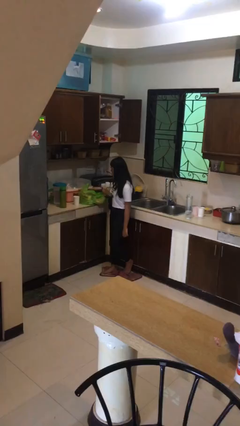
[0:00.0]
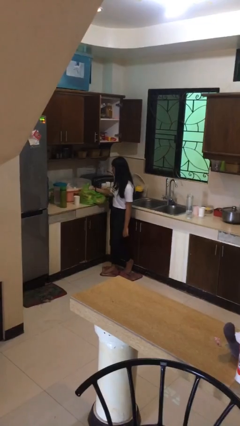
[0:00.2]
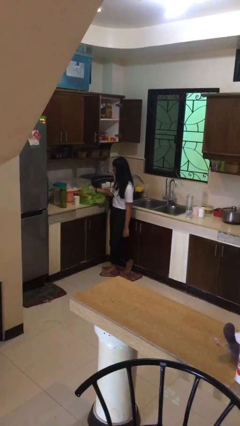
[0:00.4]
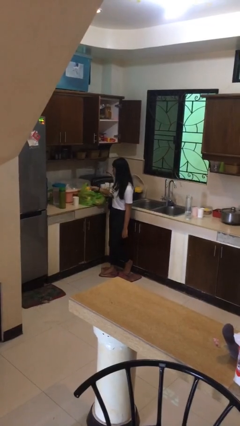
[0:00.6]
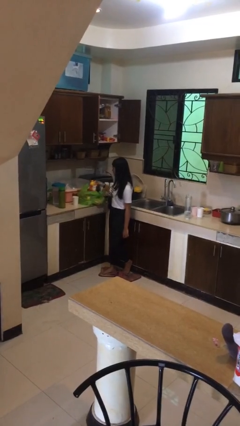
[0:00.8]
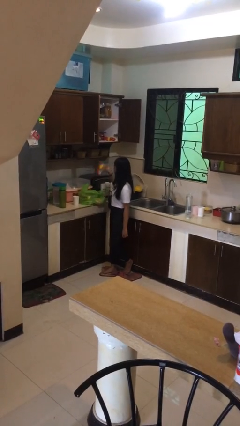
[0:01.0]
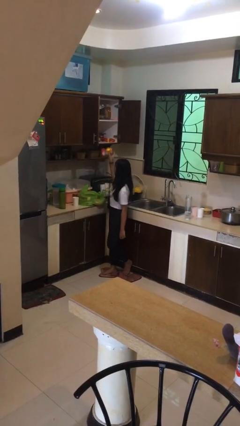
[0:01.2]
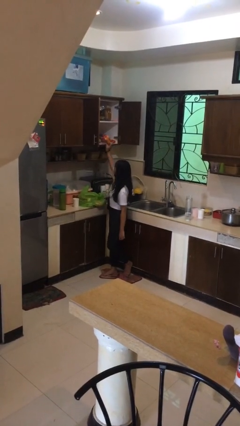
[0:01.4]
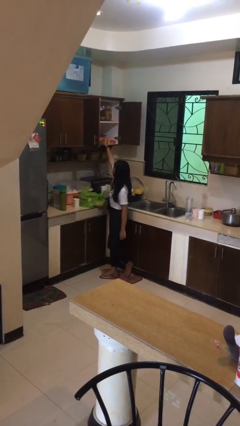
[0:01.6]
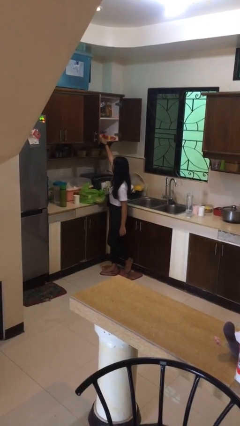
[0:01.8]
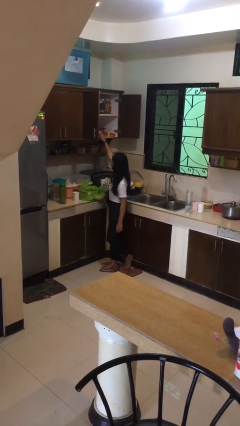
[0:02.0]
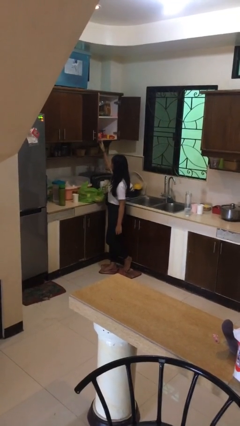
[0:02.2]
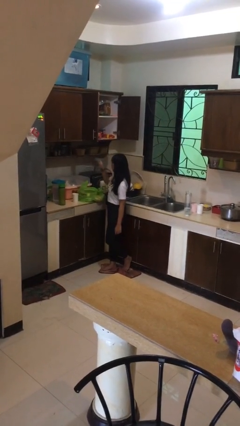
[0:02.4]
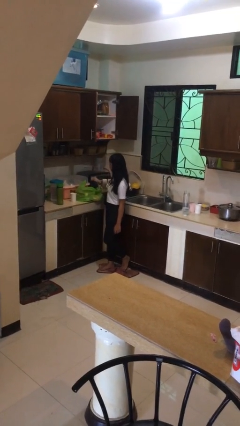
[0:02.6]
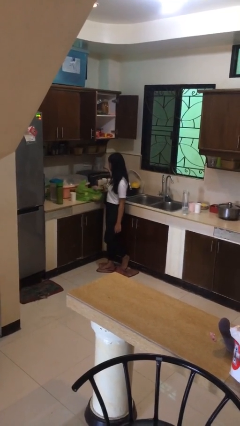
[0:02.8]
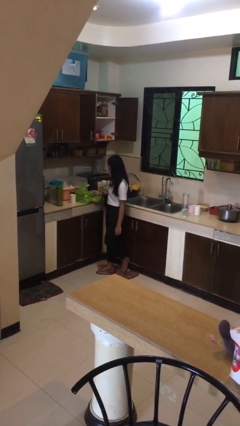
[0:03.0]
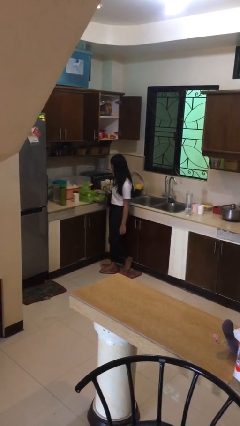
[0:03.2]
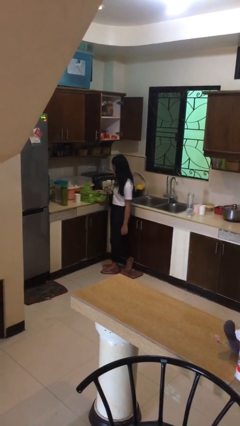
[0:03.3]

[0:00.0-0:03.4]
person loads groceries into cabinet

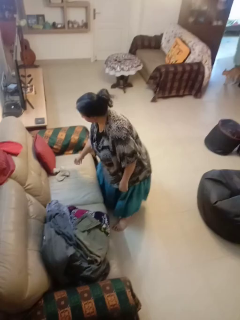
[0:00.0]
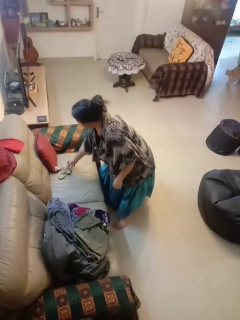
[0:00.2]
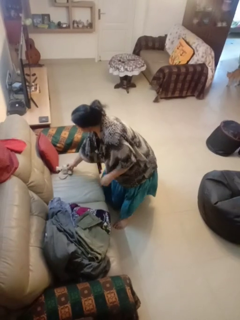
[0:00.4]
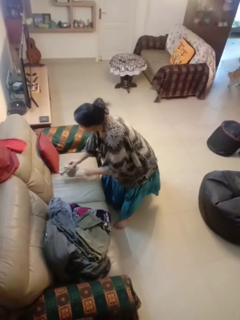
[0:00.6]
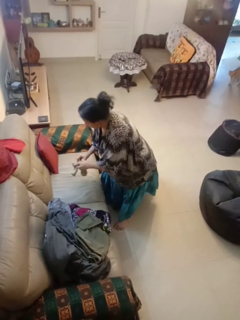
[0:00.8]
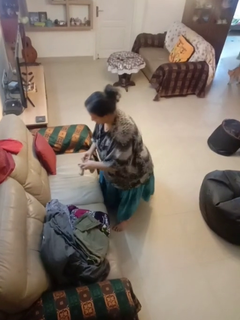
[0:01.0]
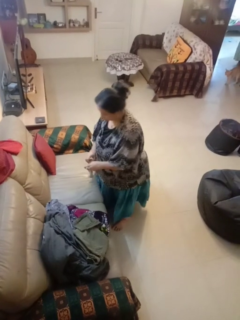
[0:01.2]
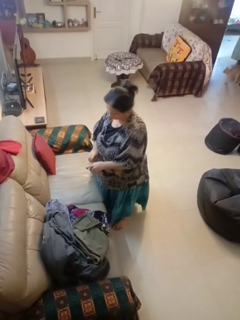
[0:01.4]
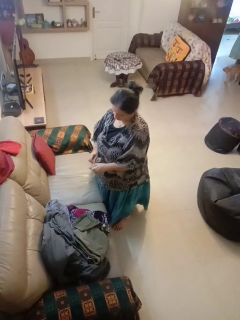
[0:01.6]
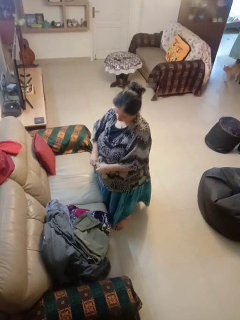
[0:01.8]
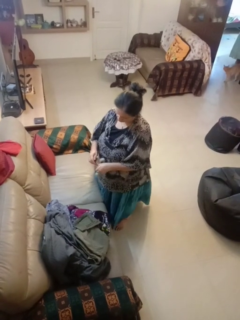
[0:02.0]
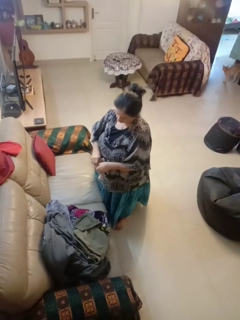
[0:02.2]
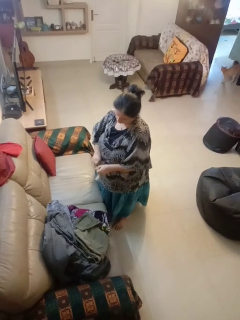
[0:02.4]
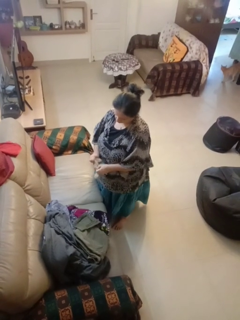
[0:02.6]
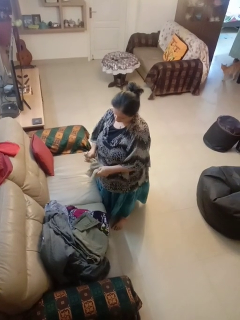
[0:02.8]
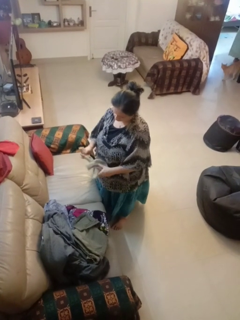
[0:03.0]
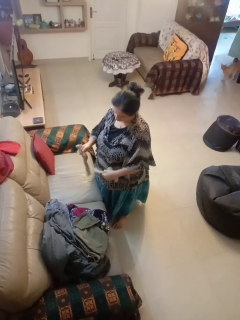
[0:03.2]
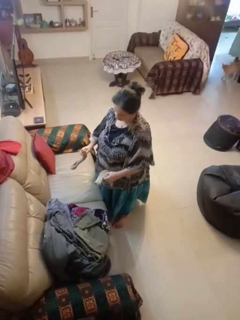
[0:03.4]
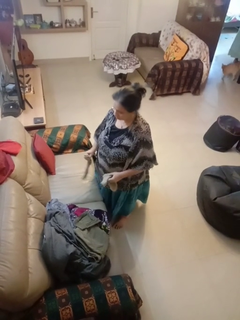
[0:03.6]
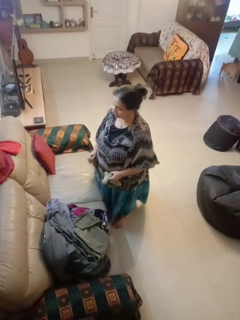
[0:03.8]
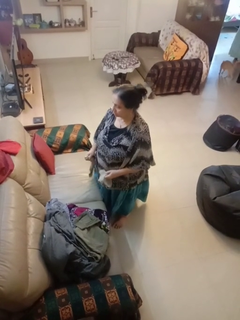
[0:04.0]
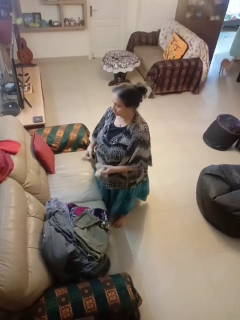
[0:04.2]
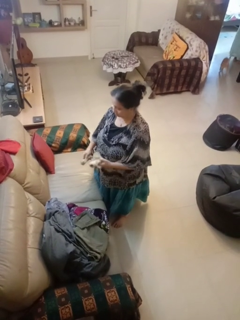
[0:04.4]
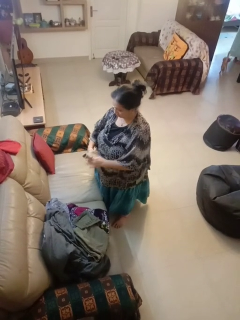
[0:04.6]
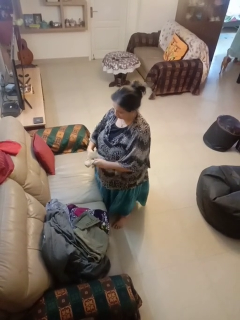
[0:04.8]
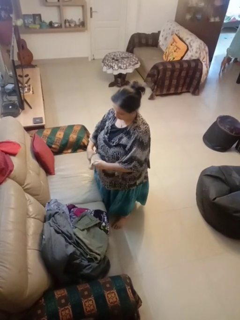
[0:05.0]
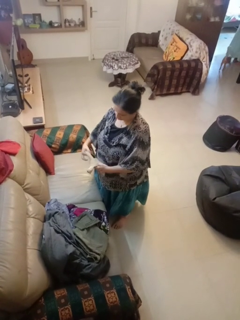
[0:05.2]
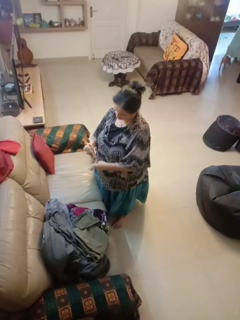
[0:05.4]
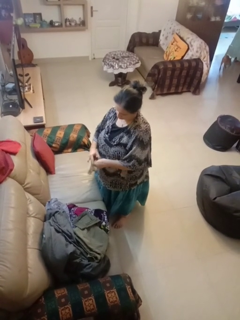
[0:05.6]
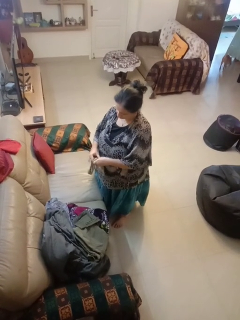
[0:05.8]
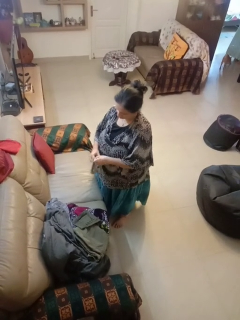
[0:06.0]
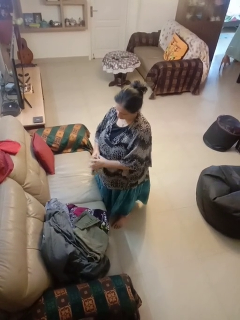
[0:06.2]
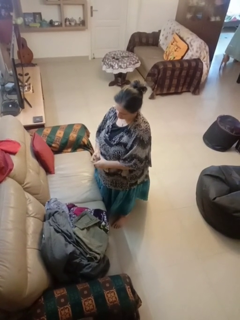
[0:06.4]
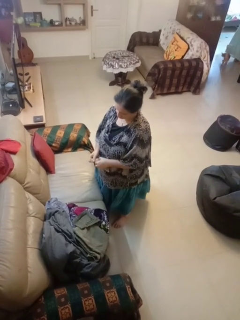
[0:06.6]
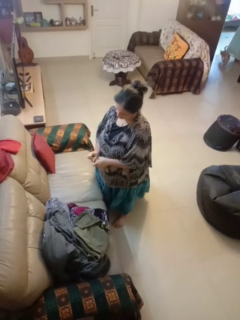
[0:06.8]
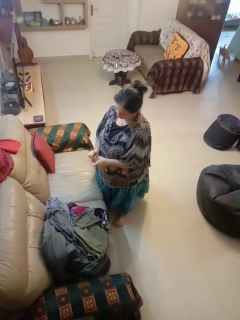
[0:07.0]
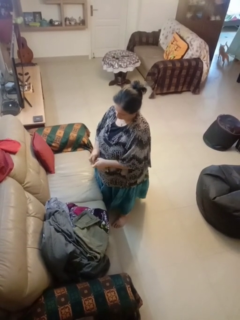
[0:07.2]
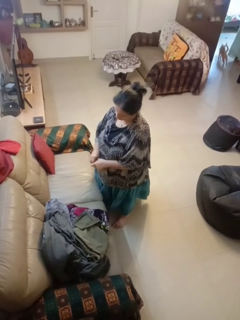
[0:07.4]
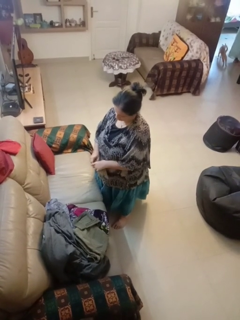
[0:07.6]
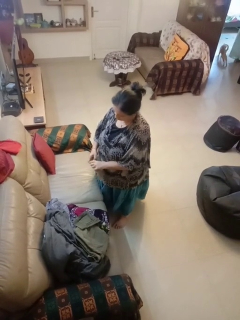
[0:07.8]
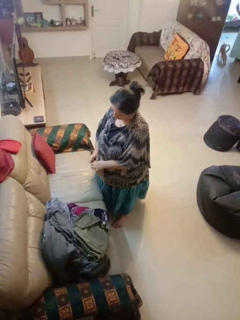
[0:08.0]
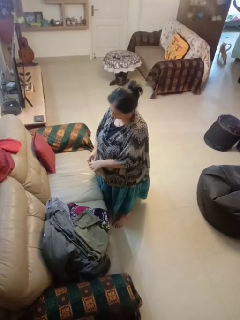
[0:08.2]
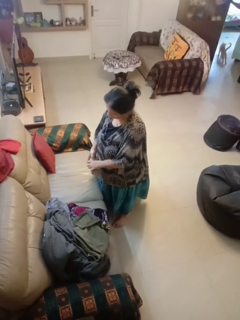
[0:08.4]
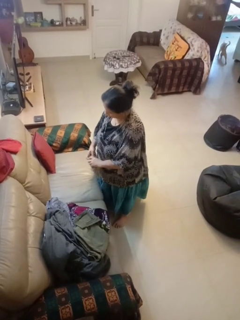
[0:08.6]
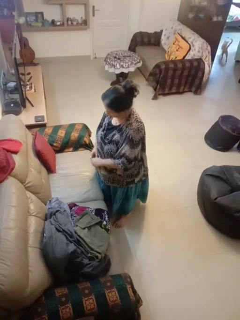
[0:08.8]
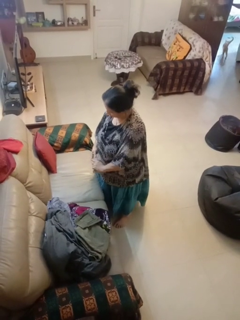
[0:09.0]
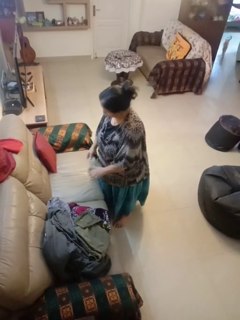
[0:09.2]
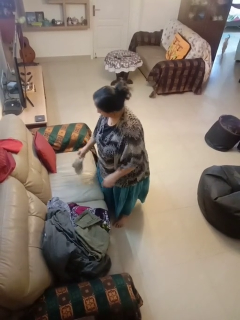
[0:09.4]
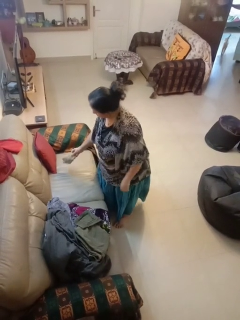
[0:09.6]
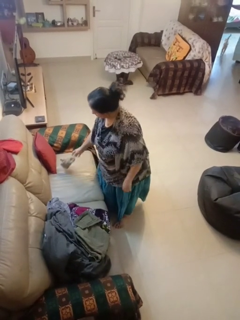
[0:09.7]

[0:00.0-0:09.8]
person folds socks

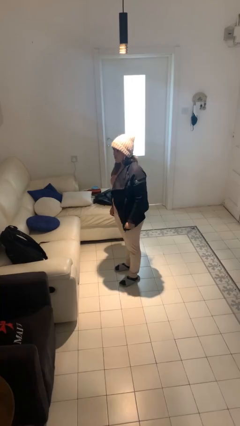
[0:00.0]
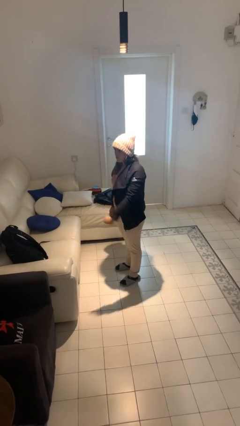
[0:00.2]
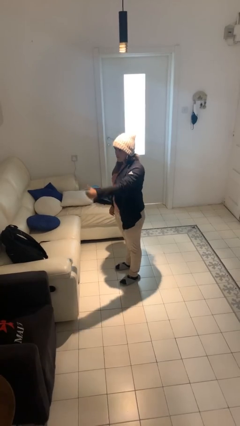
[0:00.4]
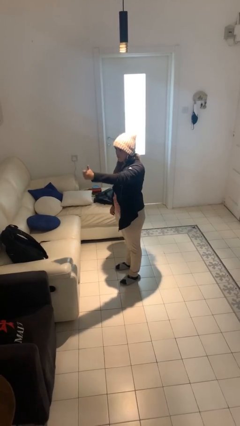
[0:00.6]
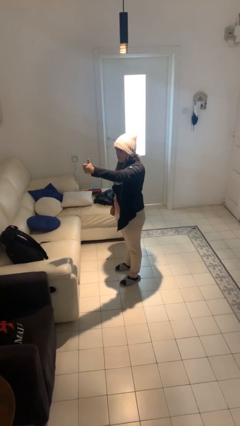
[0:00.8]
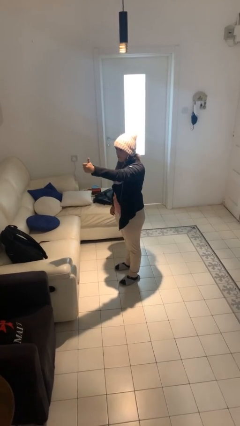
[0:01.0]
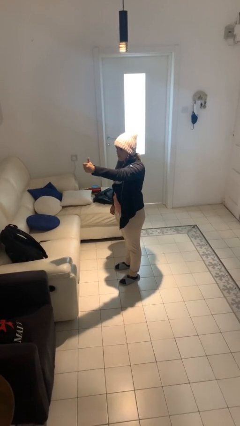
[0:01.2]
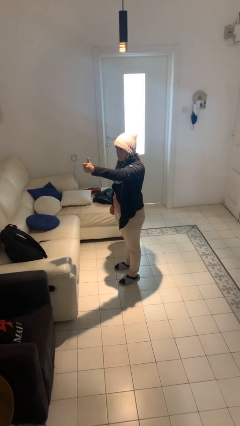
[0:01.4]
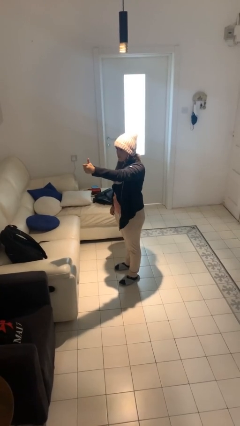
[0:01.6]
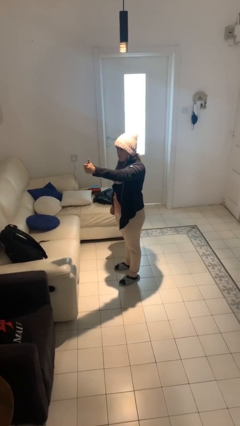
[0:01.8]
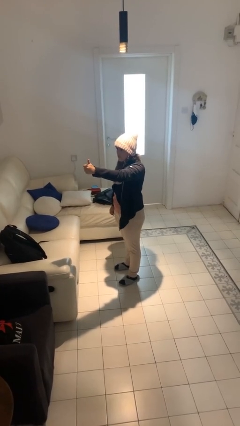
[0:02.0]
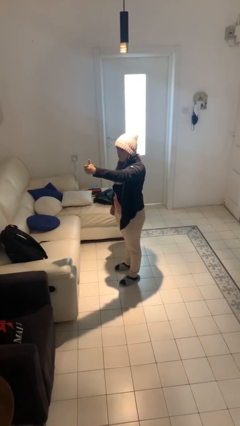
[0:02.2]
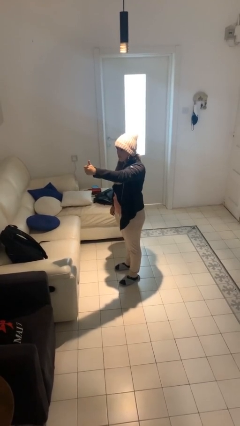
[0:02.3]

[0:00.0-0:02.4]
person gestures thumbs up

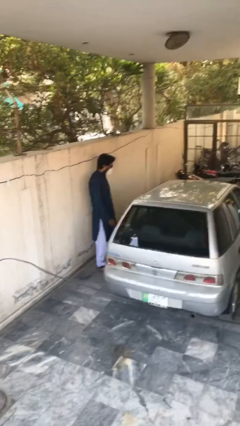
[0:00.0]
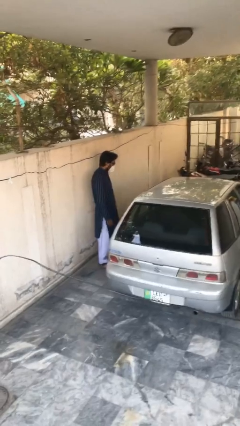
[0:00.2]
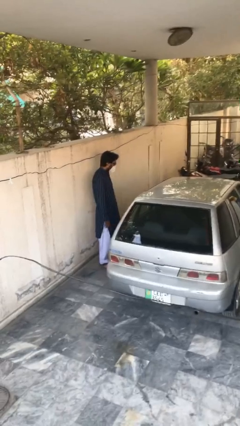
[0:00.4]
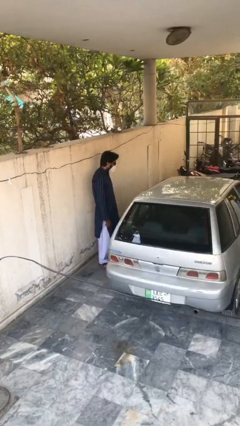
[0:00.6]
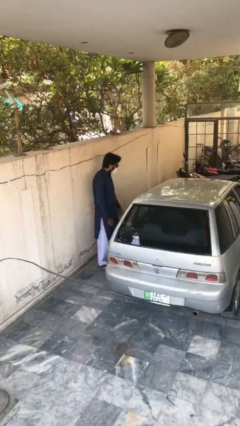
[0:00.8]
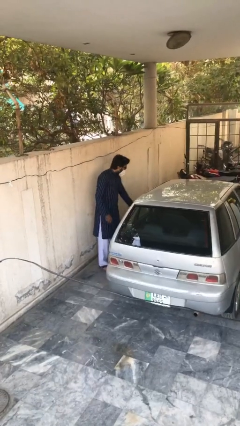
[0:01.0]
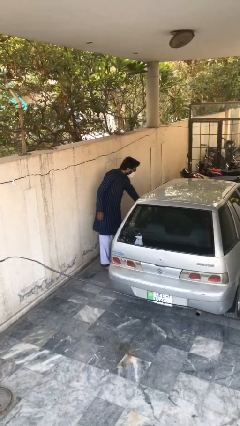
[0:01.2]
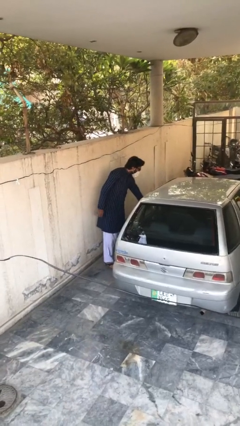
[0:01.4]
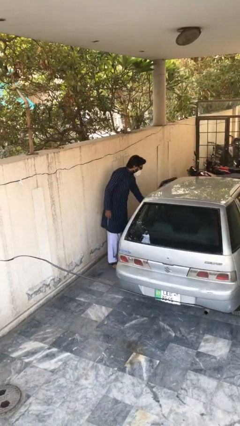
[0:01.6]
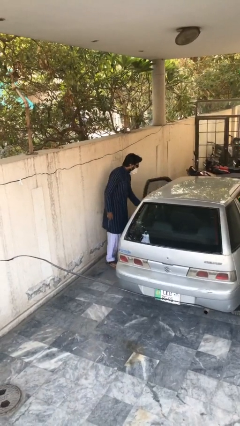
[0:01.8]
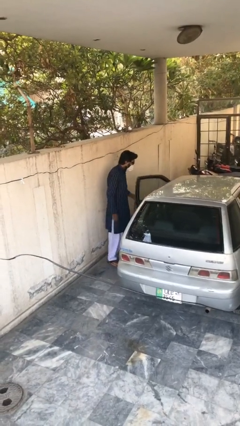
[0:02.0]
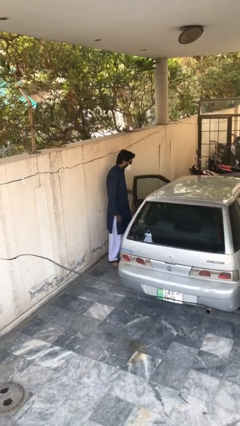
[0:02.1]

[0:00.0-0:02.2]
person opens car door

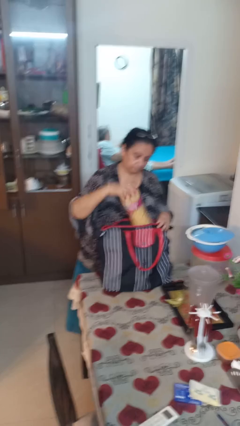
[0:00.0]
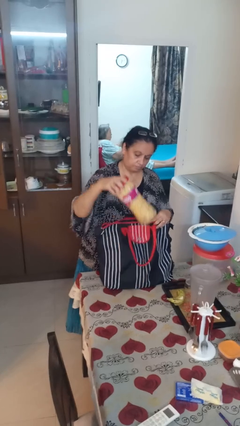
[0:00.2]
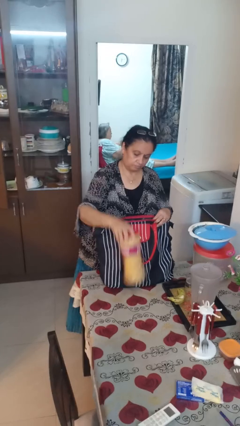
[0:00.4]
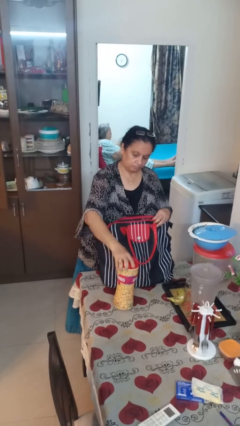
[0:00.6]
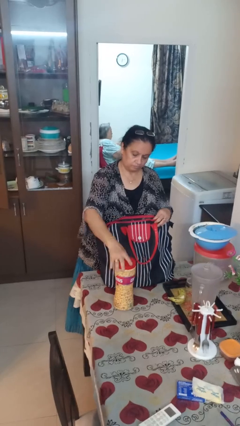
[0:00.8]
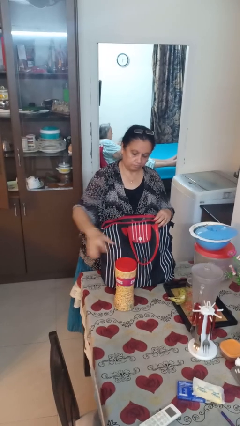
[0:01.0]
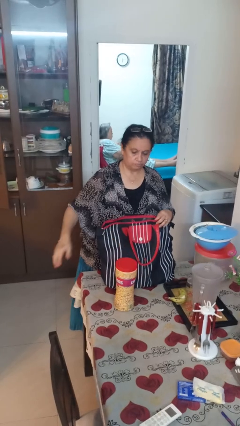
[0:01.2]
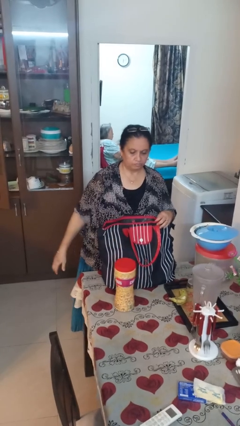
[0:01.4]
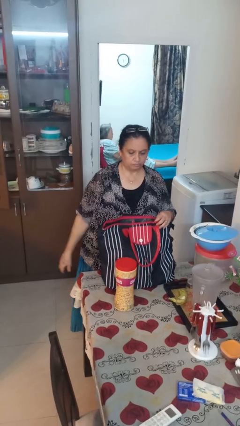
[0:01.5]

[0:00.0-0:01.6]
person takes object from bag

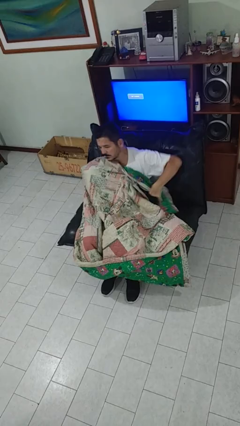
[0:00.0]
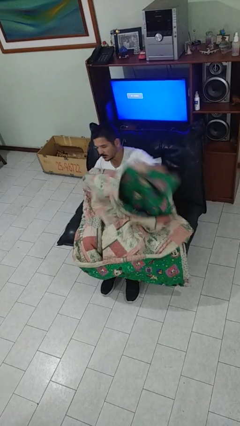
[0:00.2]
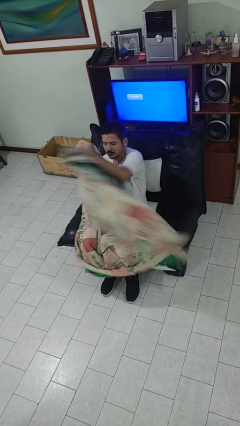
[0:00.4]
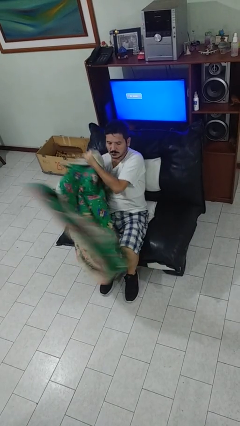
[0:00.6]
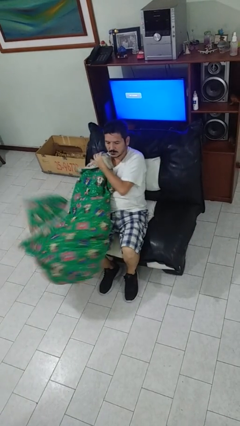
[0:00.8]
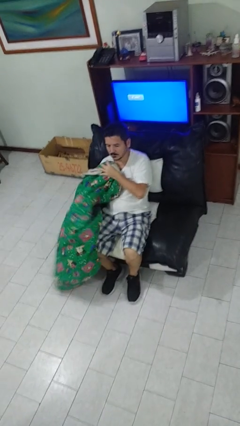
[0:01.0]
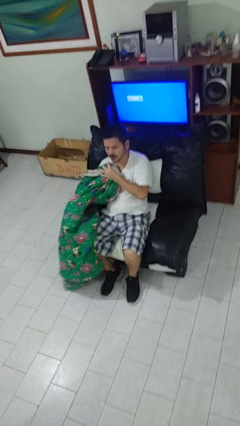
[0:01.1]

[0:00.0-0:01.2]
person uncovers with blanket
